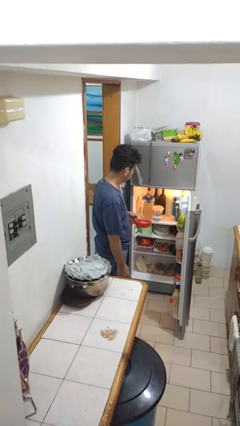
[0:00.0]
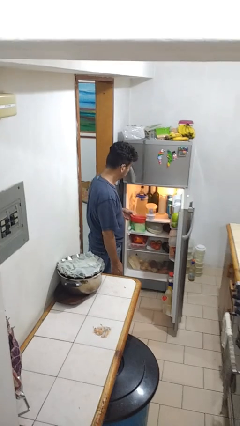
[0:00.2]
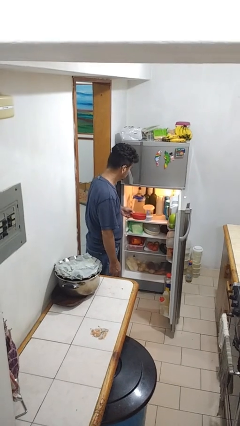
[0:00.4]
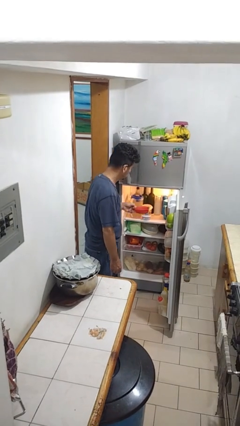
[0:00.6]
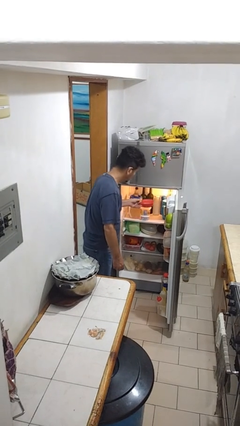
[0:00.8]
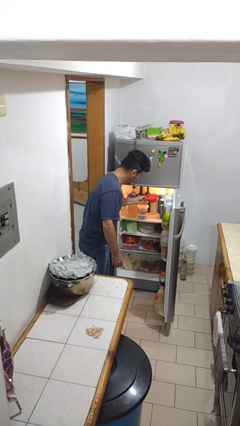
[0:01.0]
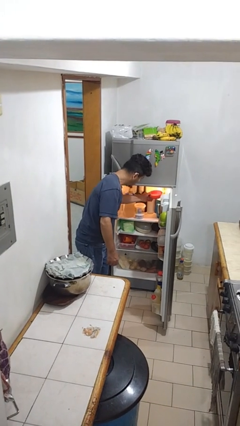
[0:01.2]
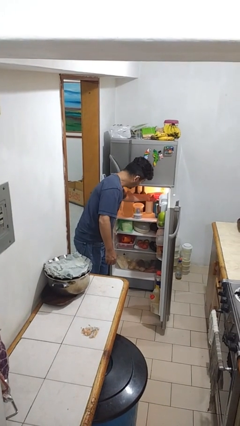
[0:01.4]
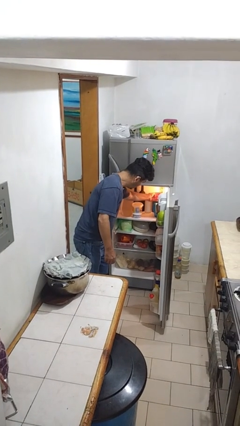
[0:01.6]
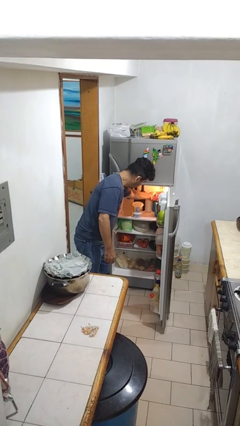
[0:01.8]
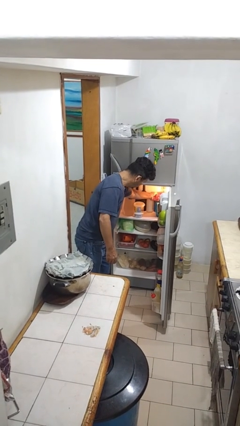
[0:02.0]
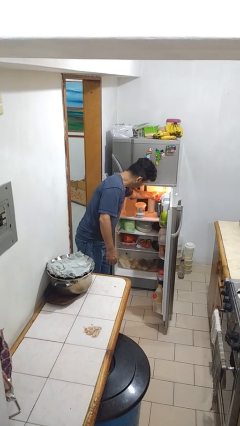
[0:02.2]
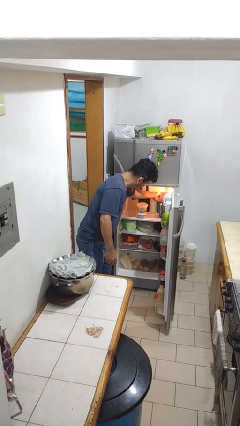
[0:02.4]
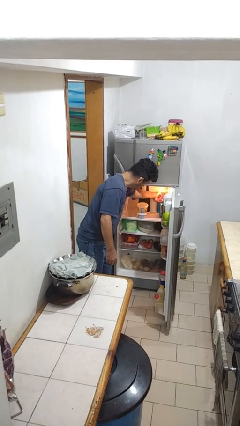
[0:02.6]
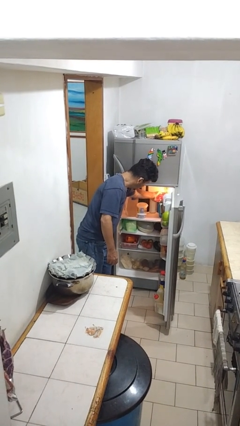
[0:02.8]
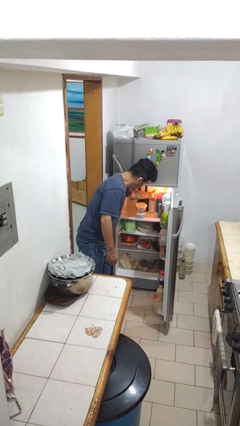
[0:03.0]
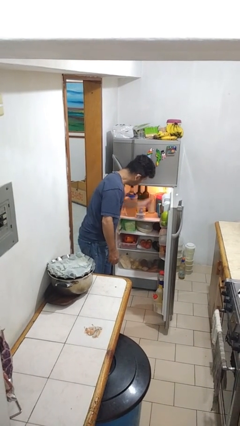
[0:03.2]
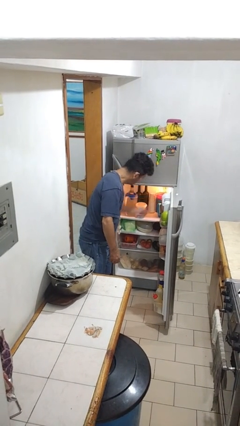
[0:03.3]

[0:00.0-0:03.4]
person puts object into refrigerator

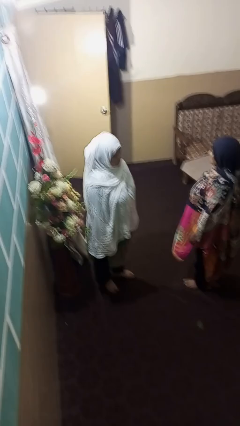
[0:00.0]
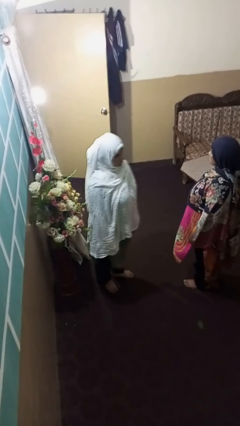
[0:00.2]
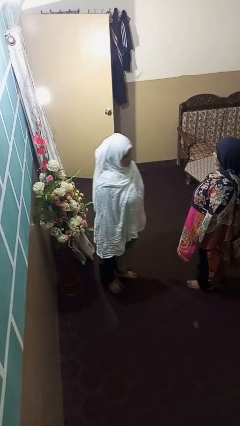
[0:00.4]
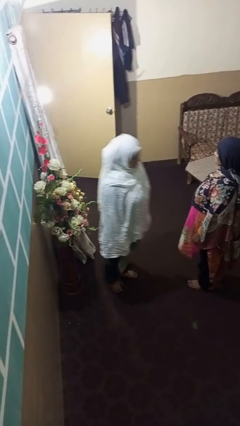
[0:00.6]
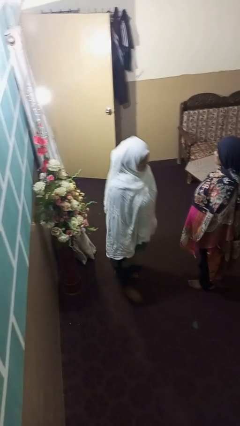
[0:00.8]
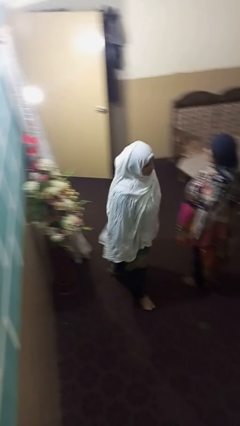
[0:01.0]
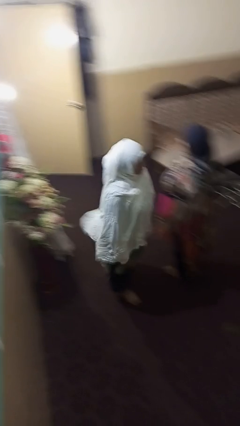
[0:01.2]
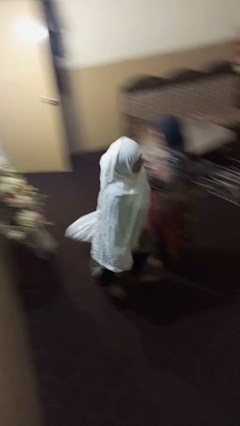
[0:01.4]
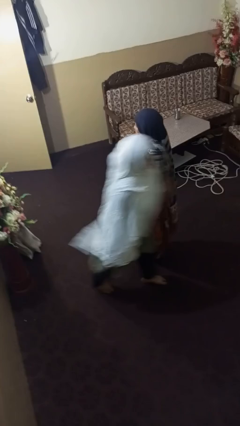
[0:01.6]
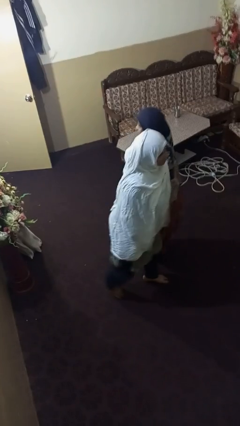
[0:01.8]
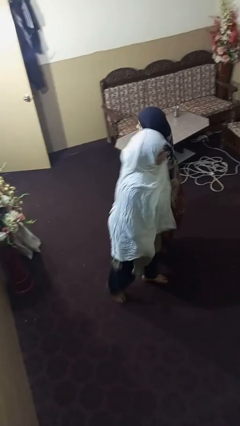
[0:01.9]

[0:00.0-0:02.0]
person shoves person

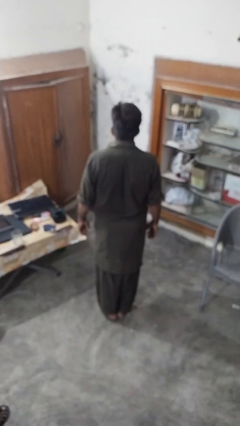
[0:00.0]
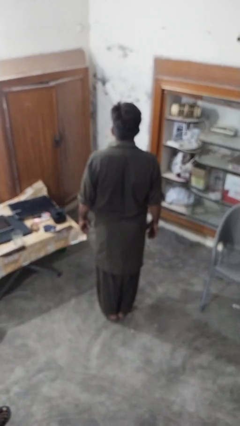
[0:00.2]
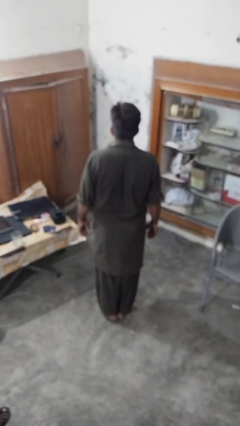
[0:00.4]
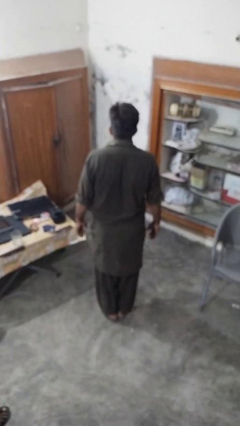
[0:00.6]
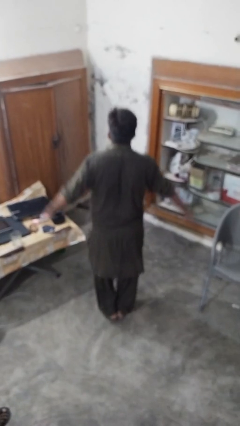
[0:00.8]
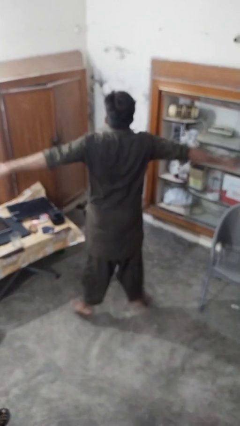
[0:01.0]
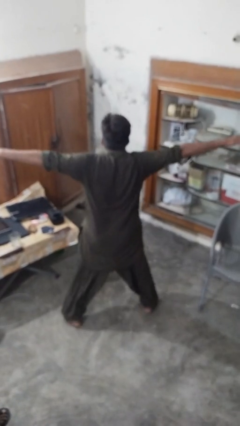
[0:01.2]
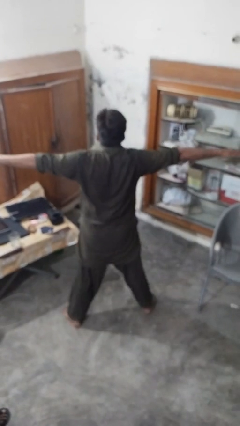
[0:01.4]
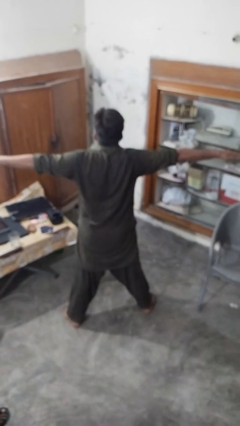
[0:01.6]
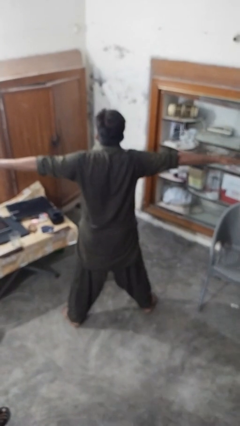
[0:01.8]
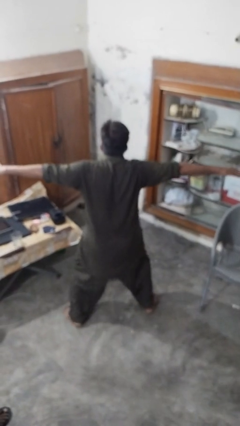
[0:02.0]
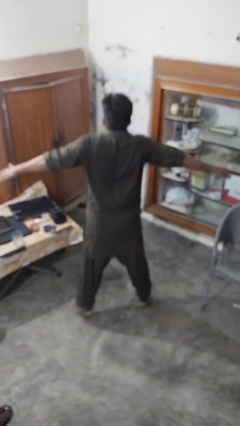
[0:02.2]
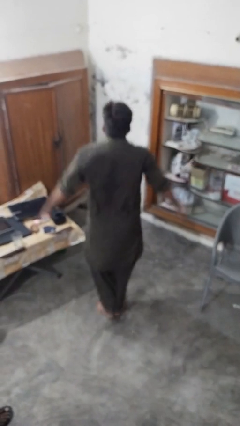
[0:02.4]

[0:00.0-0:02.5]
person exercises with jumping jacks

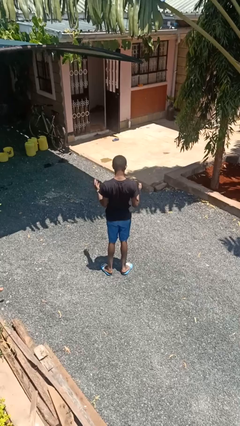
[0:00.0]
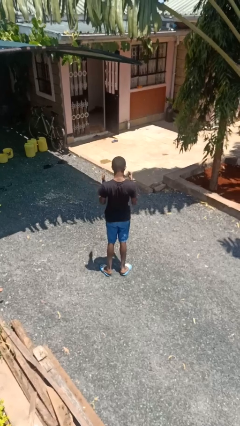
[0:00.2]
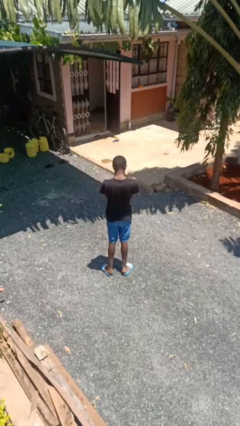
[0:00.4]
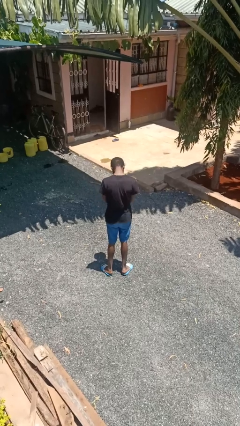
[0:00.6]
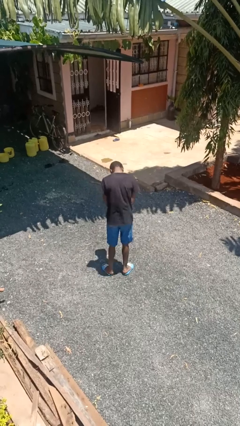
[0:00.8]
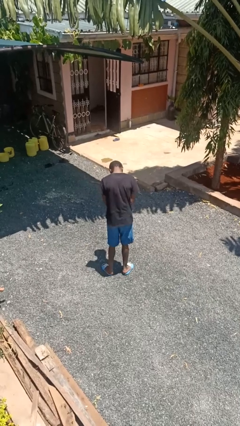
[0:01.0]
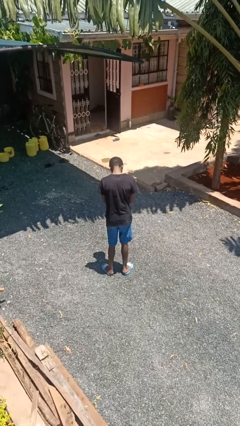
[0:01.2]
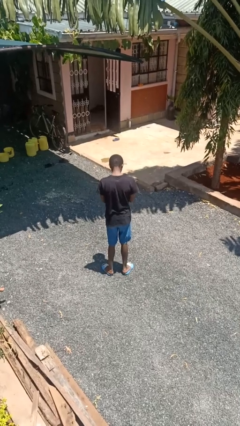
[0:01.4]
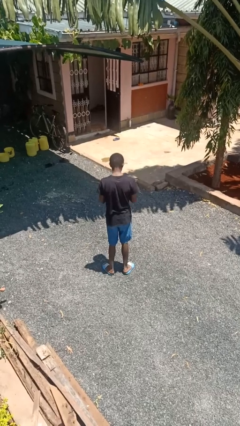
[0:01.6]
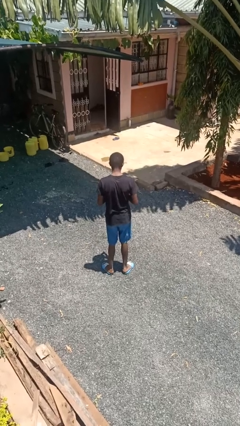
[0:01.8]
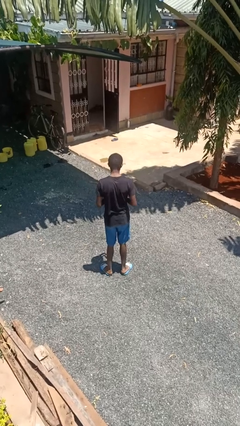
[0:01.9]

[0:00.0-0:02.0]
person sneezes into hand

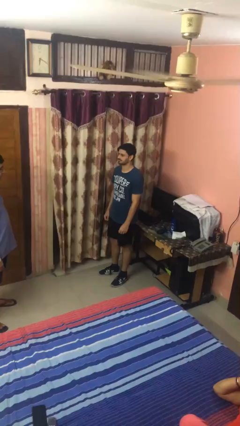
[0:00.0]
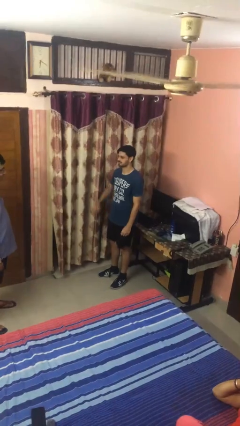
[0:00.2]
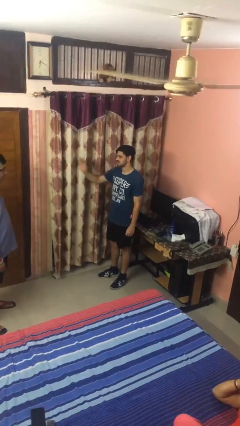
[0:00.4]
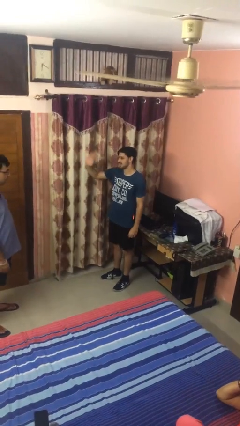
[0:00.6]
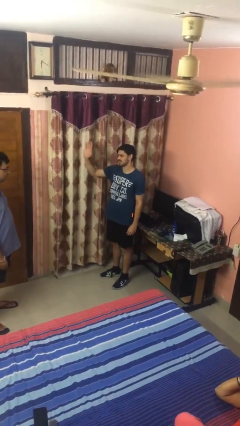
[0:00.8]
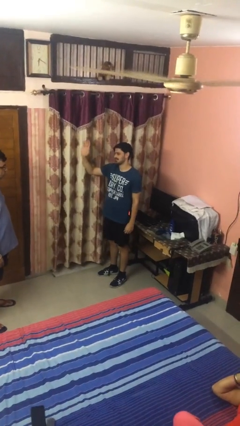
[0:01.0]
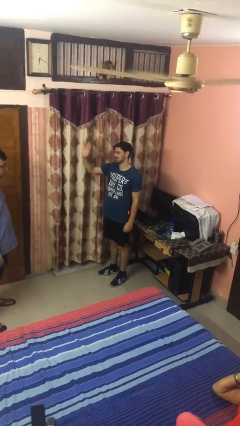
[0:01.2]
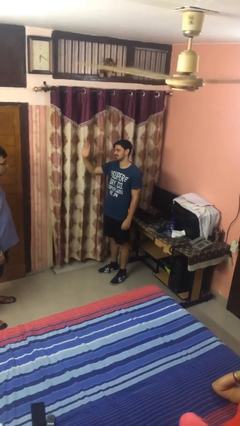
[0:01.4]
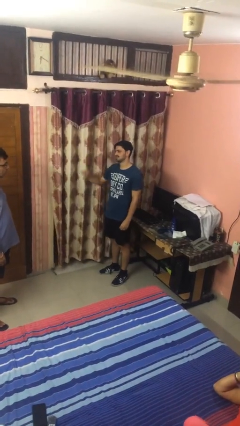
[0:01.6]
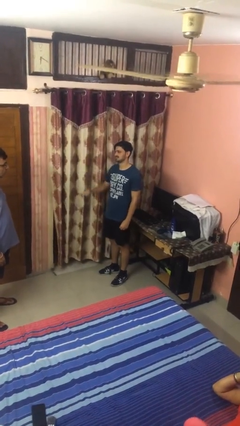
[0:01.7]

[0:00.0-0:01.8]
person waves at person

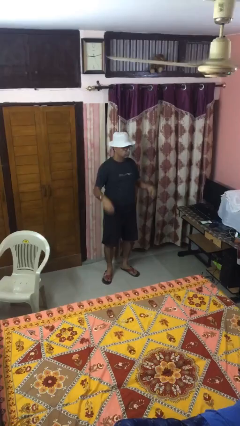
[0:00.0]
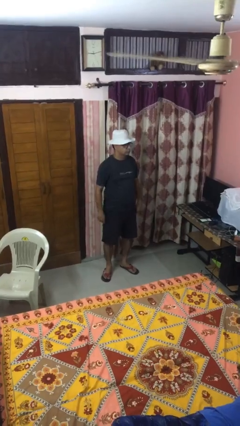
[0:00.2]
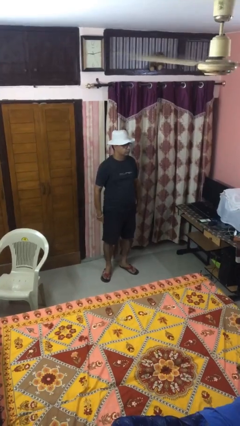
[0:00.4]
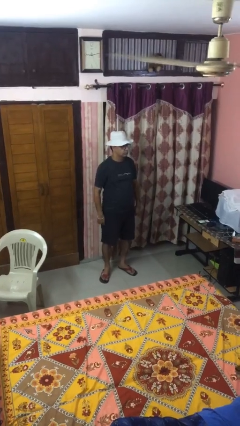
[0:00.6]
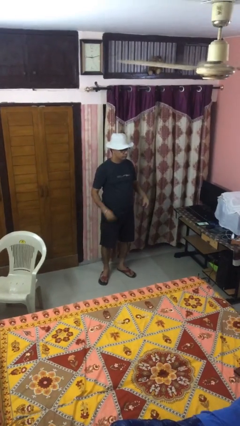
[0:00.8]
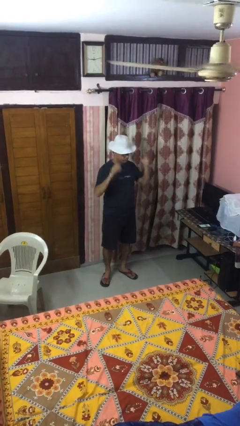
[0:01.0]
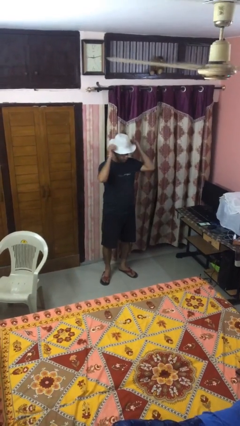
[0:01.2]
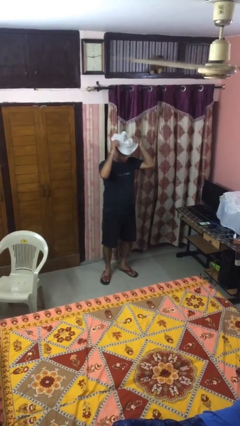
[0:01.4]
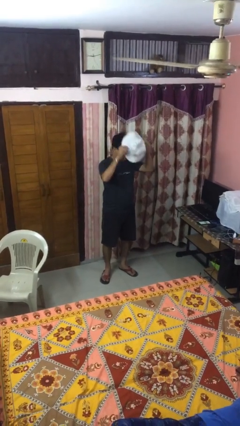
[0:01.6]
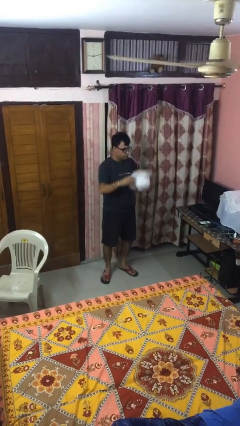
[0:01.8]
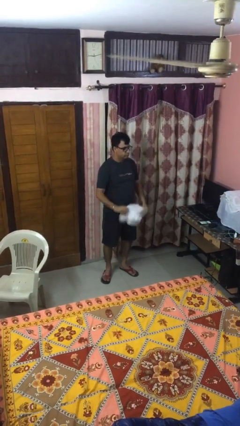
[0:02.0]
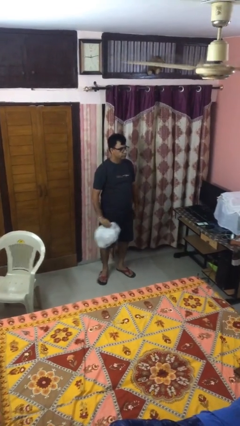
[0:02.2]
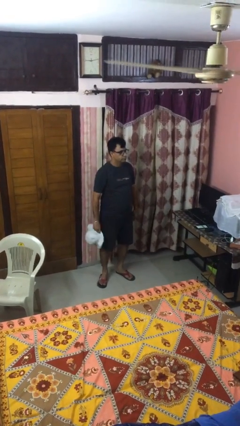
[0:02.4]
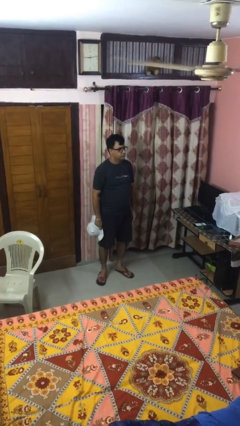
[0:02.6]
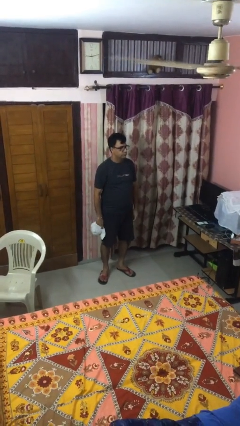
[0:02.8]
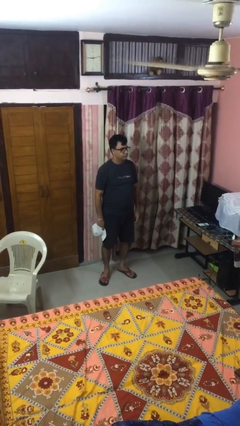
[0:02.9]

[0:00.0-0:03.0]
person takes off hat

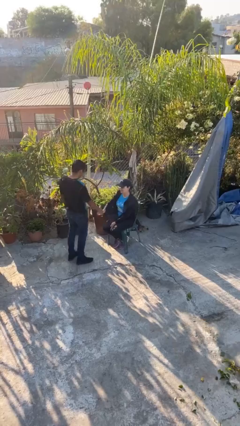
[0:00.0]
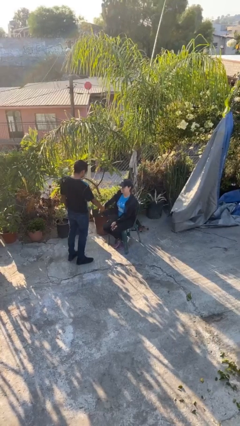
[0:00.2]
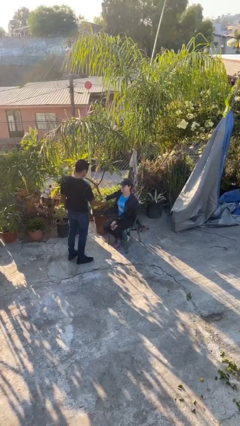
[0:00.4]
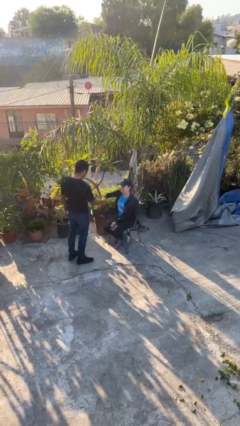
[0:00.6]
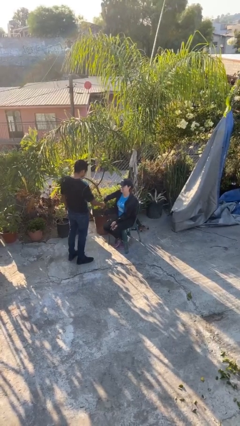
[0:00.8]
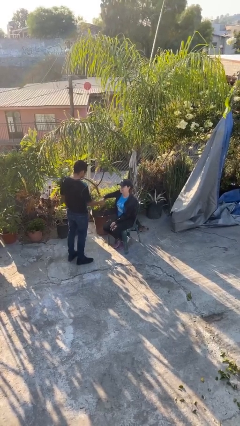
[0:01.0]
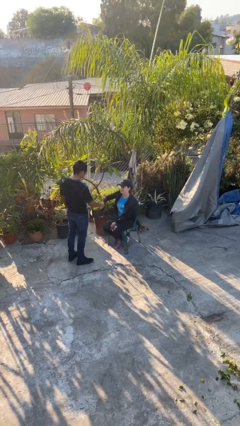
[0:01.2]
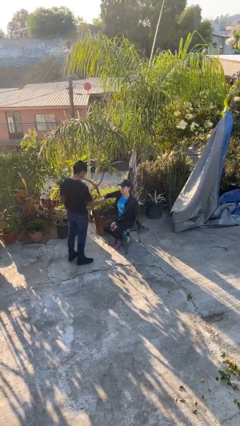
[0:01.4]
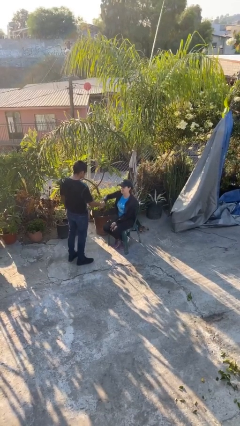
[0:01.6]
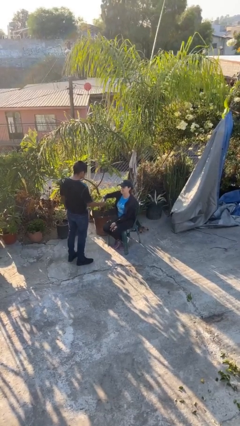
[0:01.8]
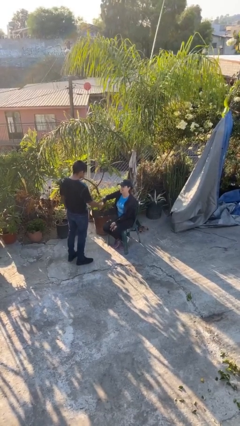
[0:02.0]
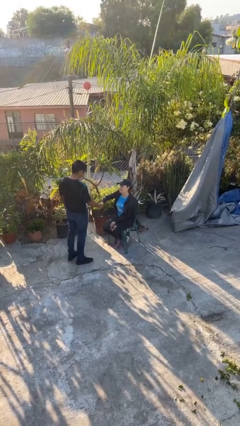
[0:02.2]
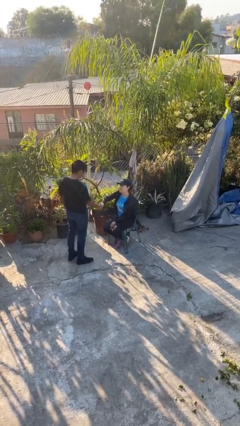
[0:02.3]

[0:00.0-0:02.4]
person shakes hand
